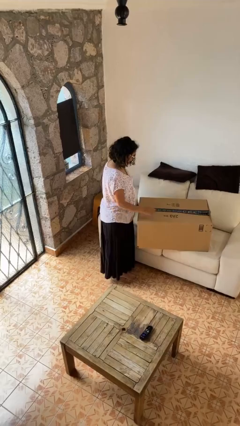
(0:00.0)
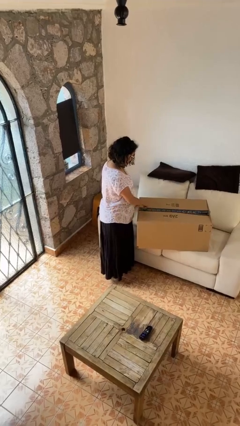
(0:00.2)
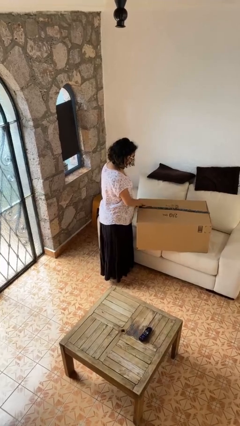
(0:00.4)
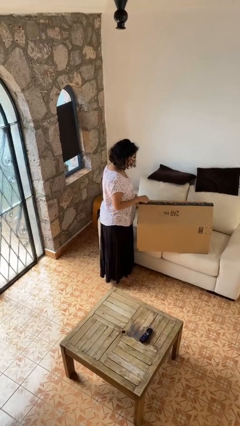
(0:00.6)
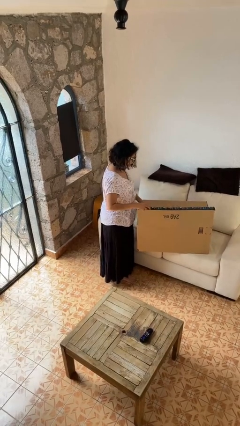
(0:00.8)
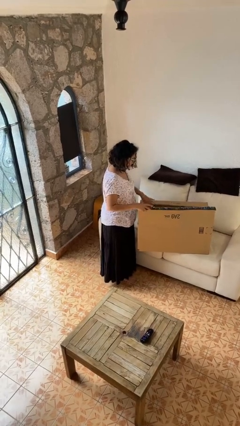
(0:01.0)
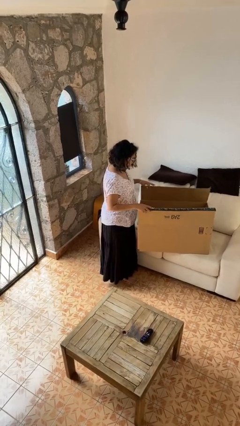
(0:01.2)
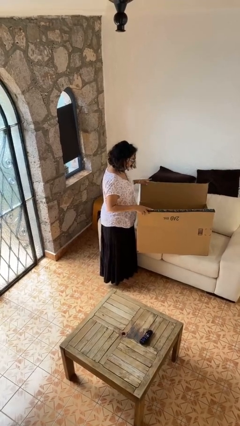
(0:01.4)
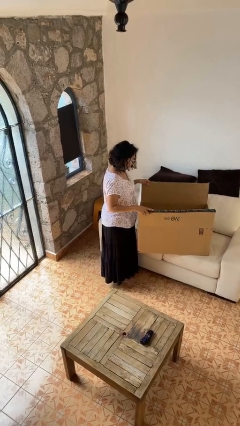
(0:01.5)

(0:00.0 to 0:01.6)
person opens box

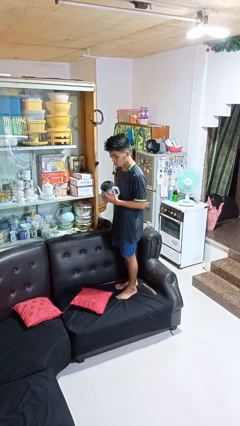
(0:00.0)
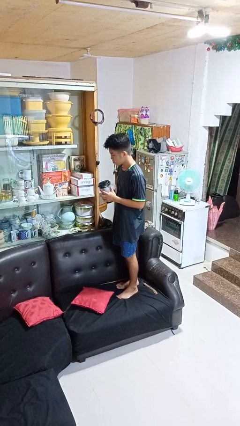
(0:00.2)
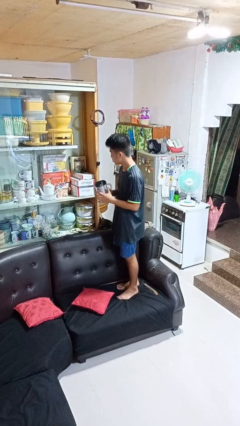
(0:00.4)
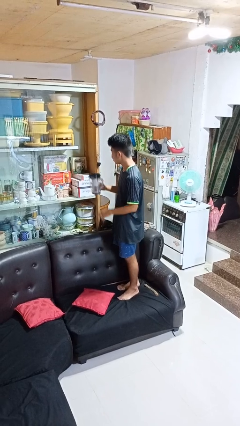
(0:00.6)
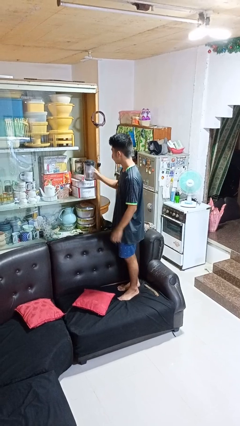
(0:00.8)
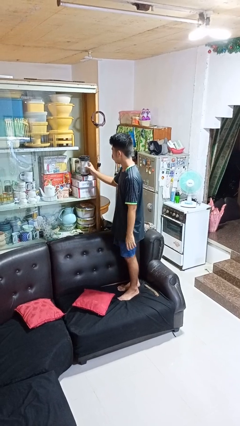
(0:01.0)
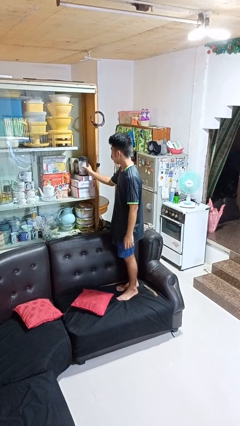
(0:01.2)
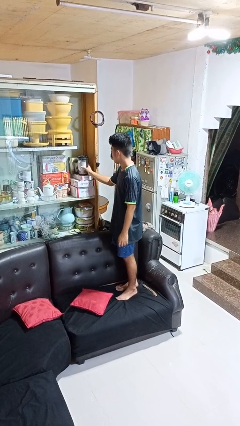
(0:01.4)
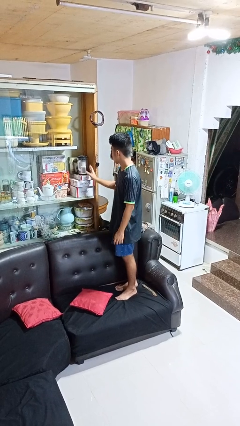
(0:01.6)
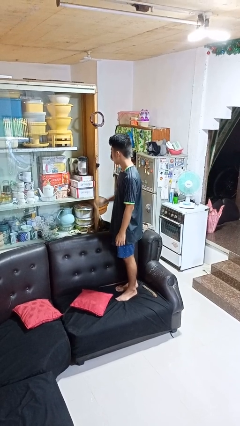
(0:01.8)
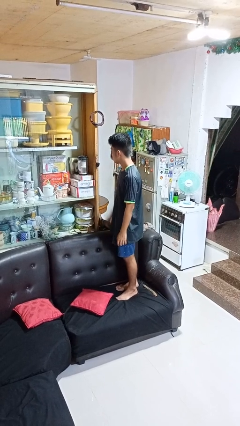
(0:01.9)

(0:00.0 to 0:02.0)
person puts down object into cabinet

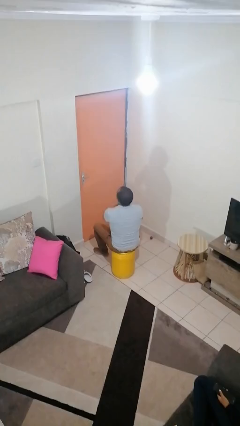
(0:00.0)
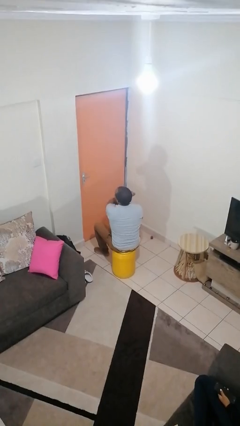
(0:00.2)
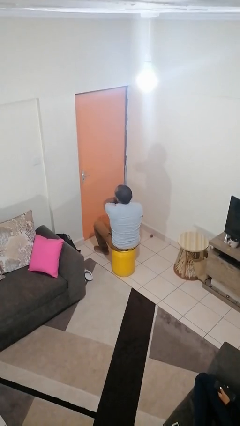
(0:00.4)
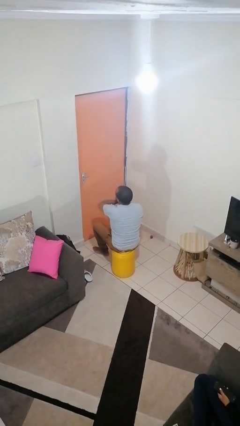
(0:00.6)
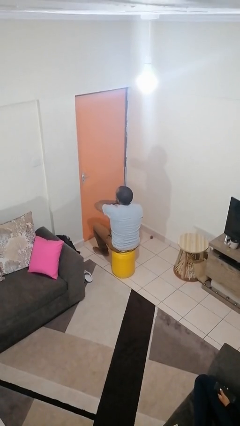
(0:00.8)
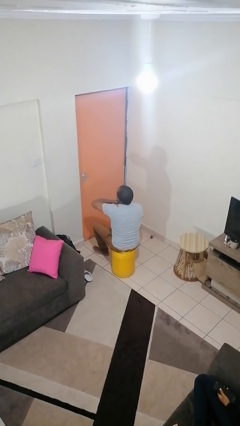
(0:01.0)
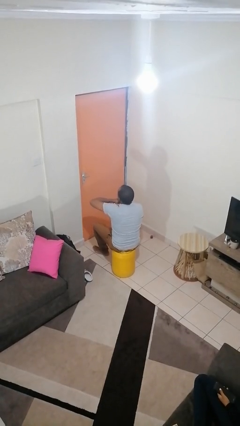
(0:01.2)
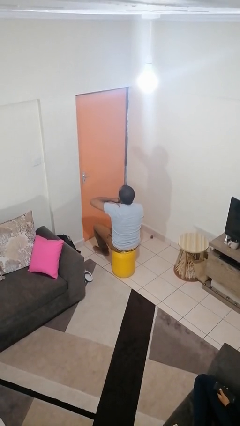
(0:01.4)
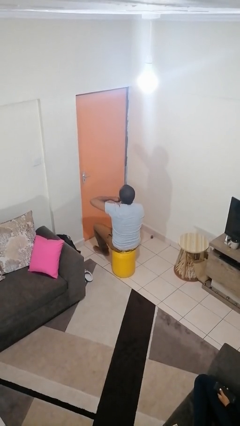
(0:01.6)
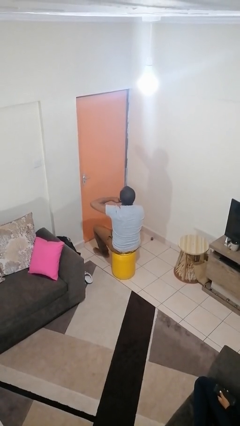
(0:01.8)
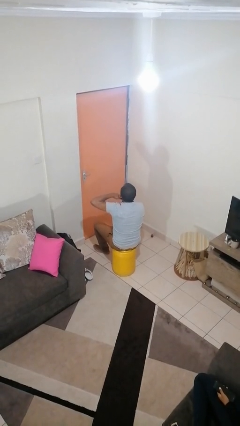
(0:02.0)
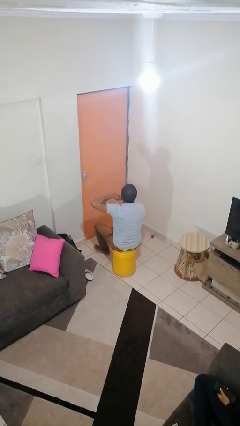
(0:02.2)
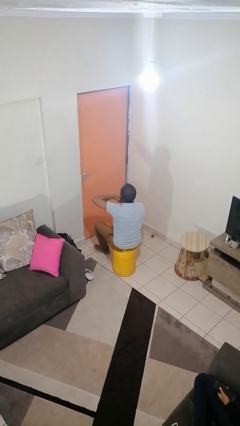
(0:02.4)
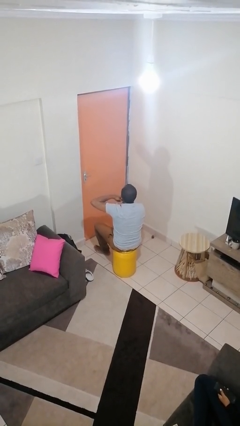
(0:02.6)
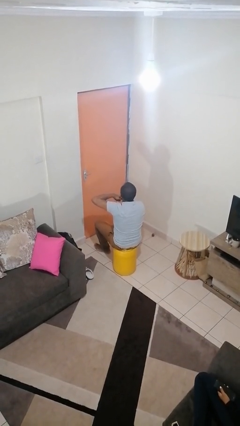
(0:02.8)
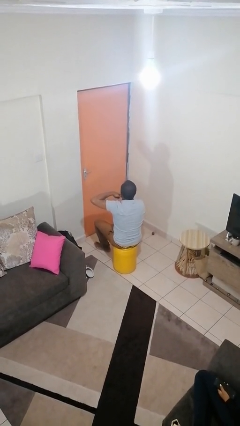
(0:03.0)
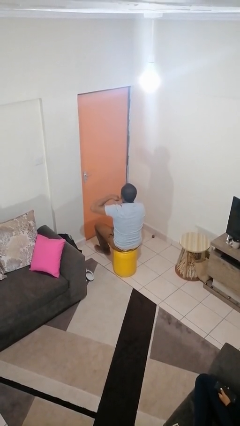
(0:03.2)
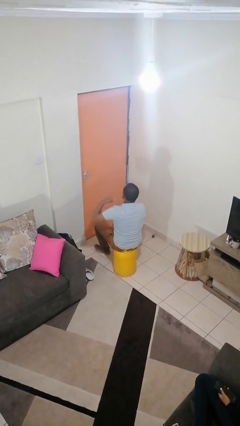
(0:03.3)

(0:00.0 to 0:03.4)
person gestures cut

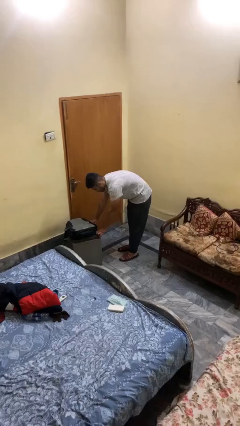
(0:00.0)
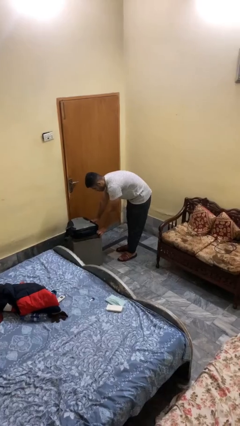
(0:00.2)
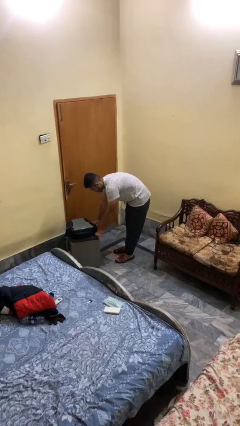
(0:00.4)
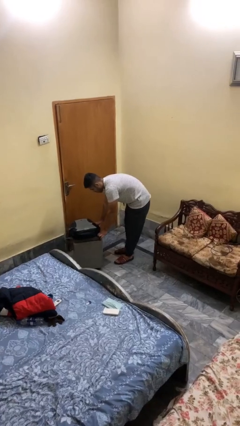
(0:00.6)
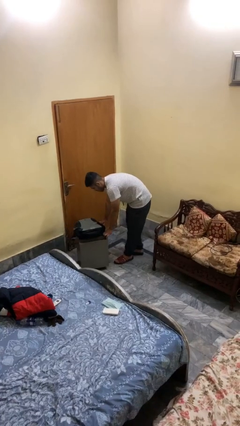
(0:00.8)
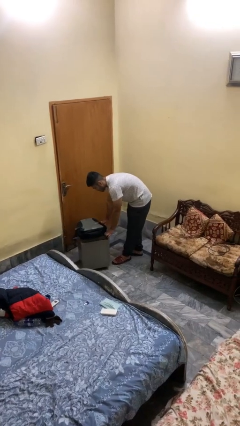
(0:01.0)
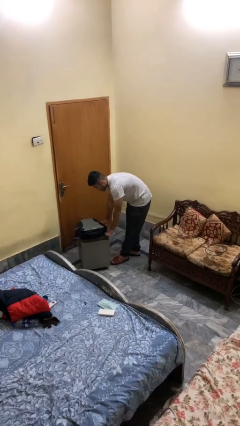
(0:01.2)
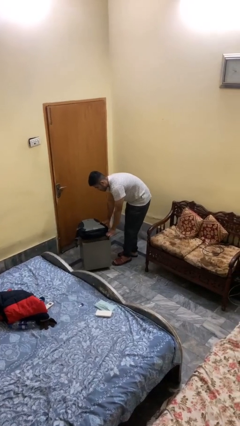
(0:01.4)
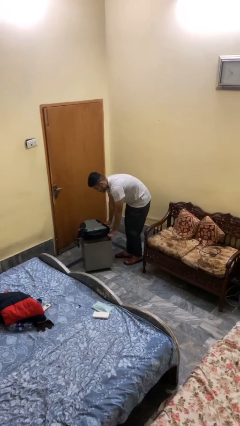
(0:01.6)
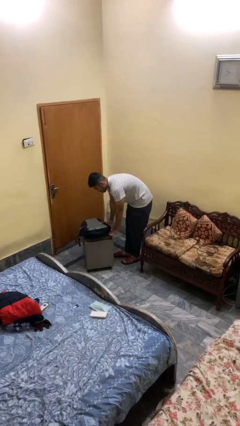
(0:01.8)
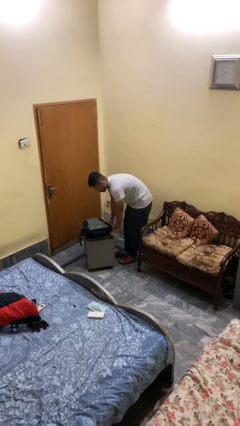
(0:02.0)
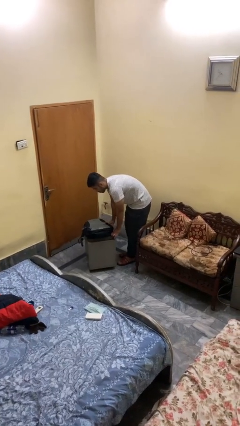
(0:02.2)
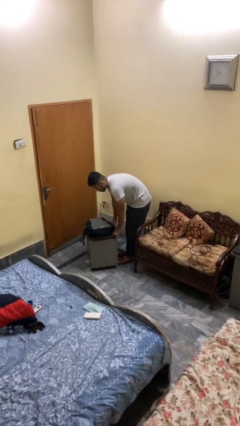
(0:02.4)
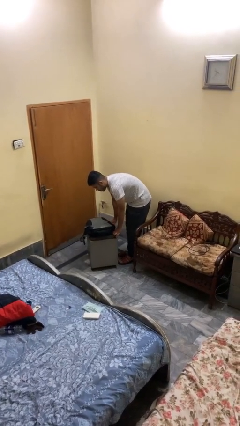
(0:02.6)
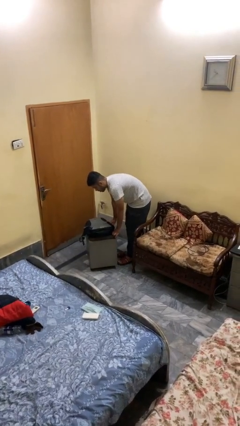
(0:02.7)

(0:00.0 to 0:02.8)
person pulls wheeled cart

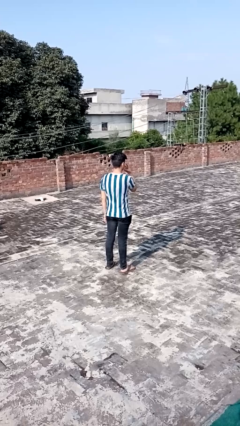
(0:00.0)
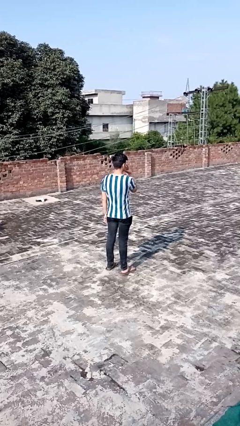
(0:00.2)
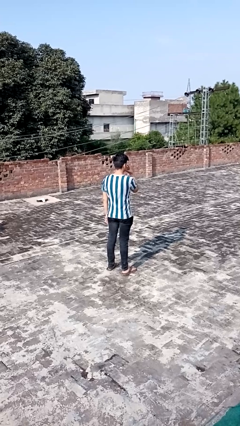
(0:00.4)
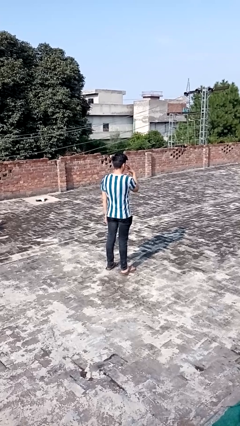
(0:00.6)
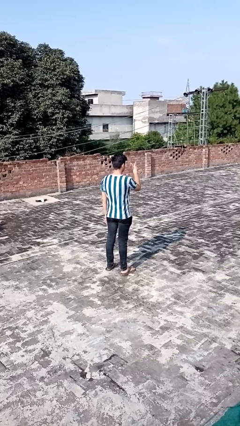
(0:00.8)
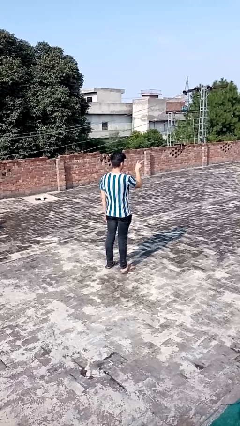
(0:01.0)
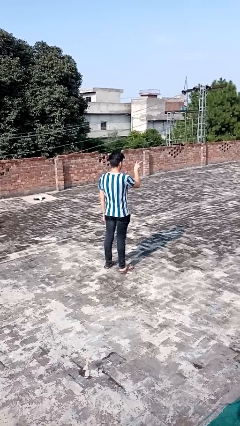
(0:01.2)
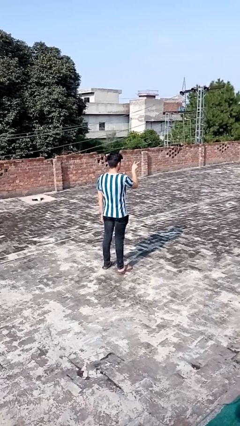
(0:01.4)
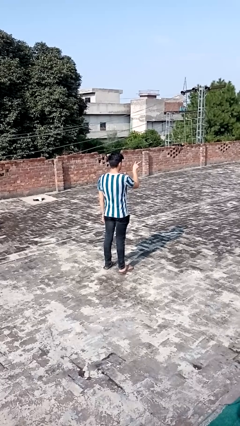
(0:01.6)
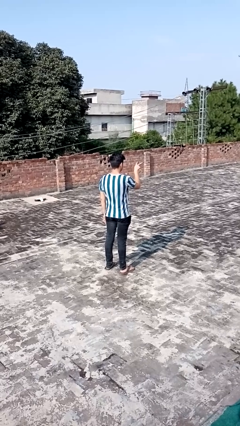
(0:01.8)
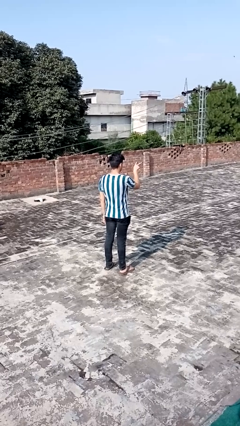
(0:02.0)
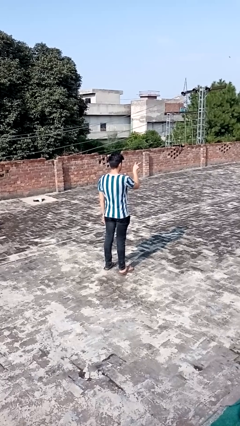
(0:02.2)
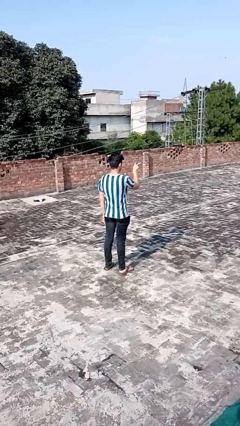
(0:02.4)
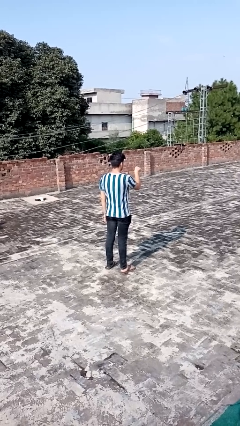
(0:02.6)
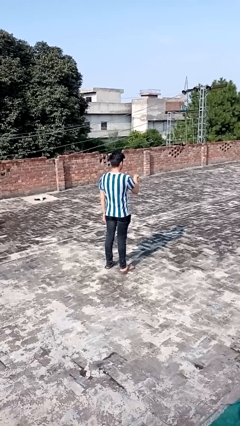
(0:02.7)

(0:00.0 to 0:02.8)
person gestures watch closely

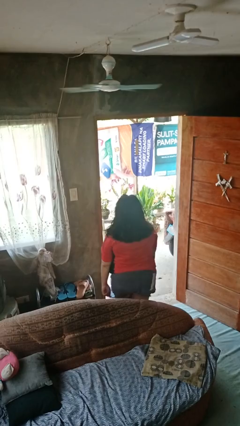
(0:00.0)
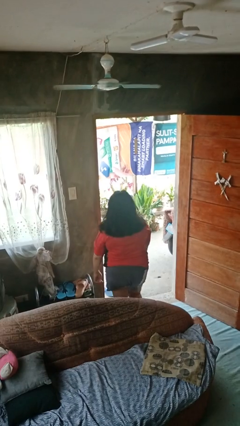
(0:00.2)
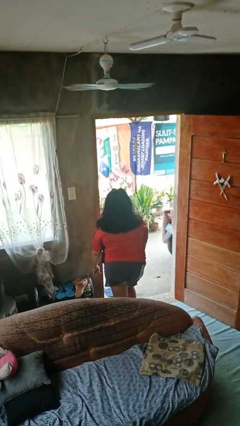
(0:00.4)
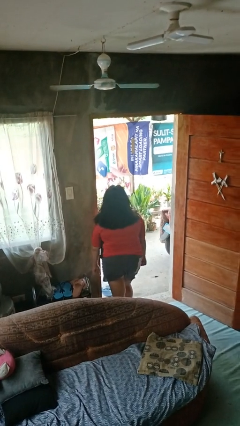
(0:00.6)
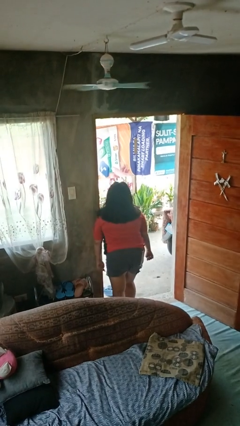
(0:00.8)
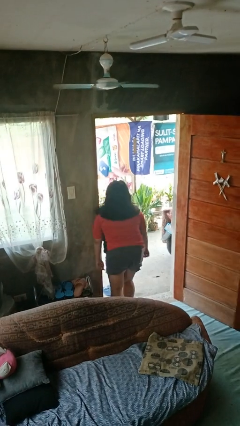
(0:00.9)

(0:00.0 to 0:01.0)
person bumps into wall

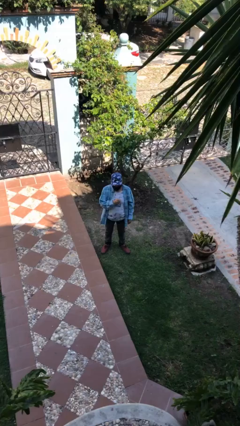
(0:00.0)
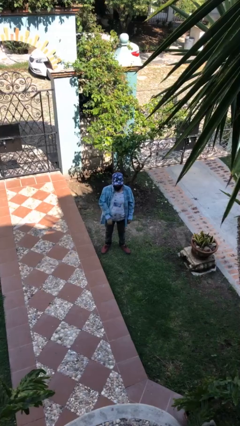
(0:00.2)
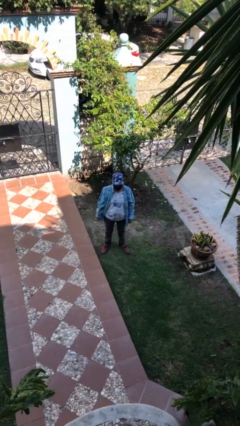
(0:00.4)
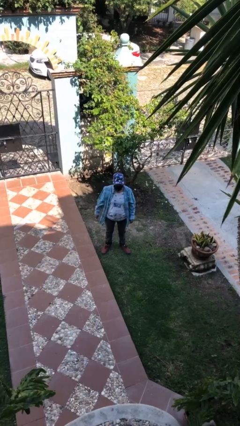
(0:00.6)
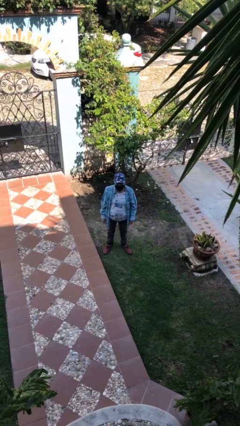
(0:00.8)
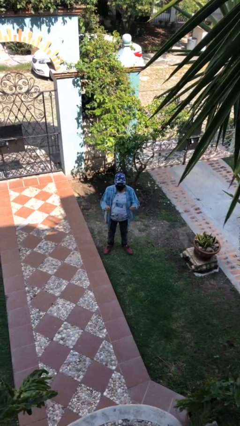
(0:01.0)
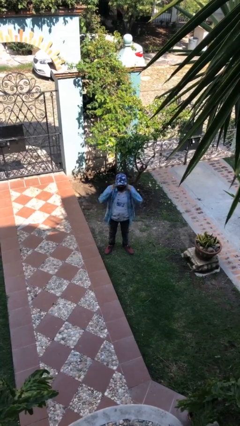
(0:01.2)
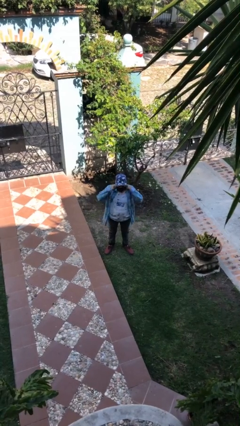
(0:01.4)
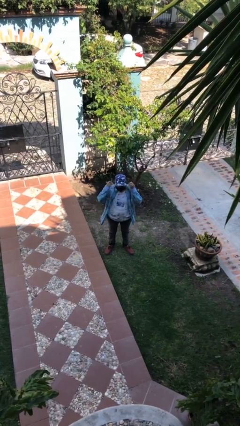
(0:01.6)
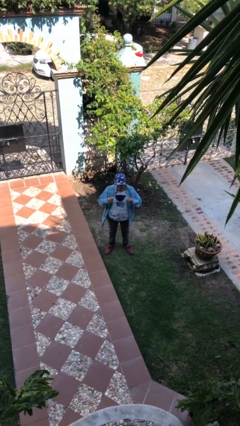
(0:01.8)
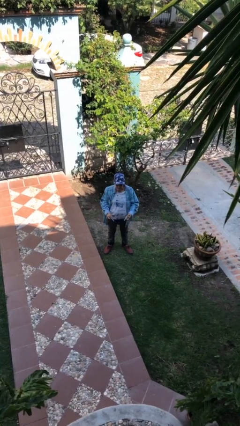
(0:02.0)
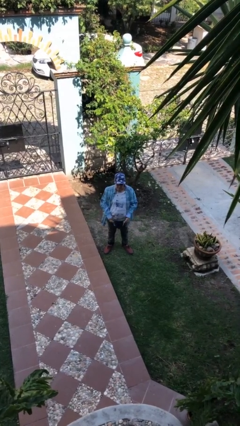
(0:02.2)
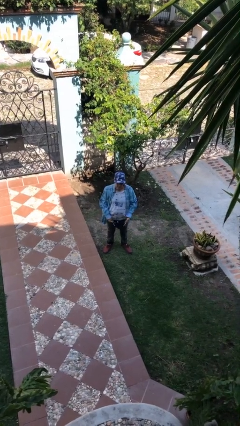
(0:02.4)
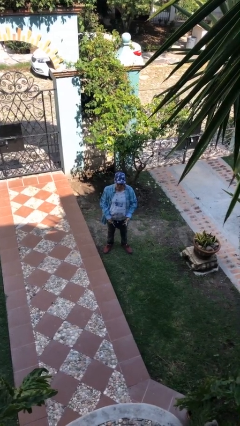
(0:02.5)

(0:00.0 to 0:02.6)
person takes off facemask

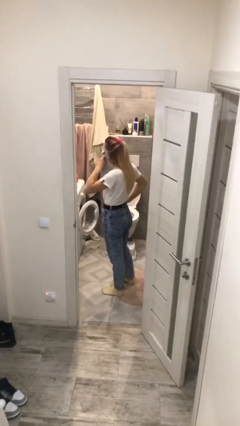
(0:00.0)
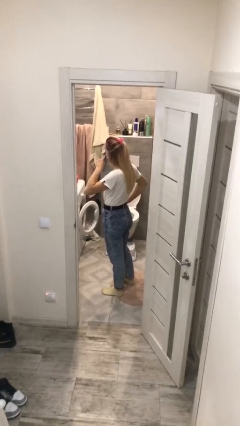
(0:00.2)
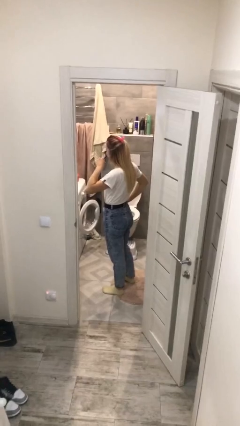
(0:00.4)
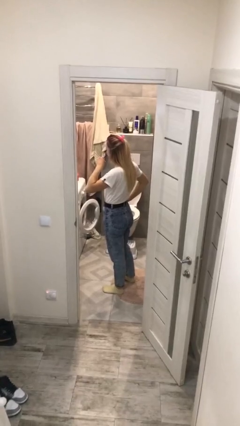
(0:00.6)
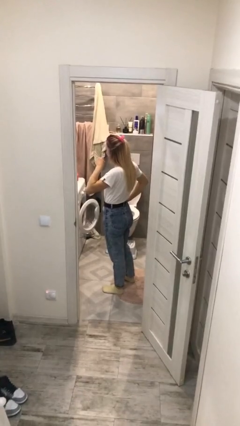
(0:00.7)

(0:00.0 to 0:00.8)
person brushes teeth
